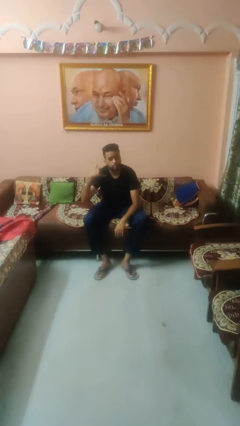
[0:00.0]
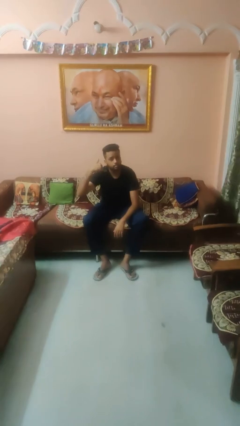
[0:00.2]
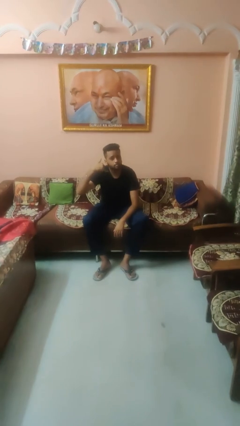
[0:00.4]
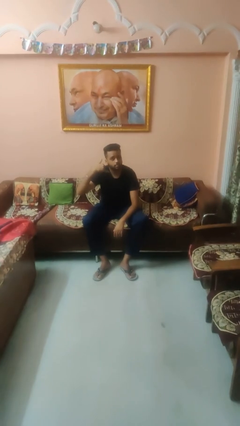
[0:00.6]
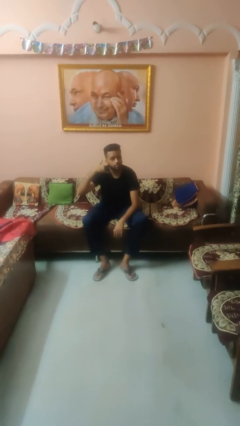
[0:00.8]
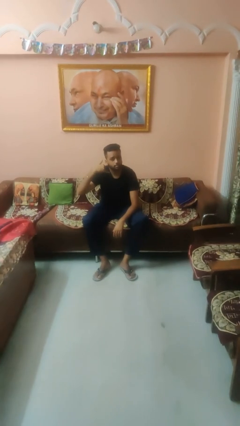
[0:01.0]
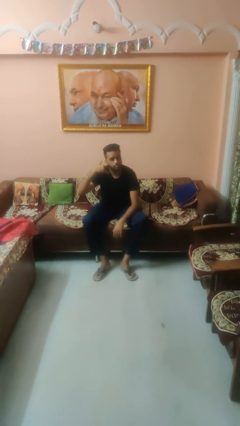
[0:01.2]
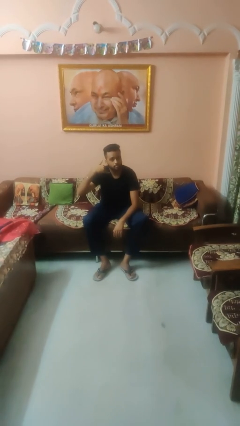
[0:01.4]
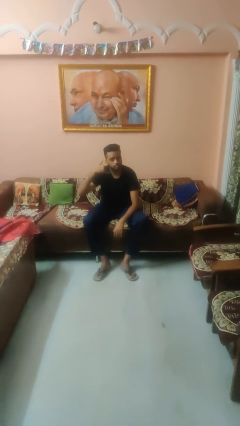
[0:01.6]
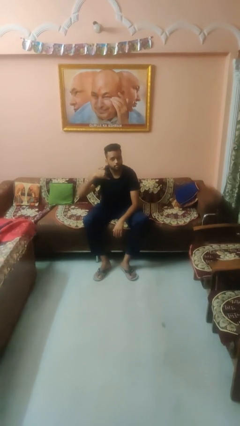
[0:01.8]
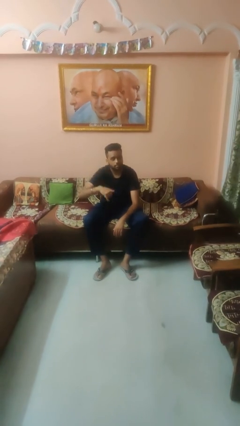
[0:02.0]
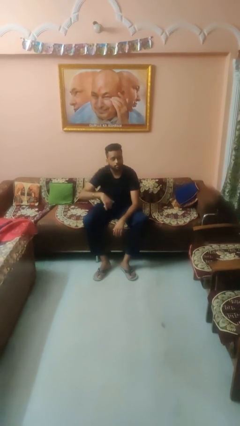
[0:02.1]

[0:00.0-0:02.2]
person gestures call me

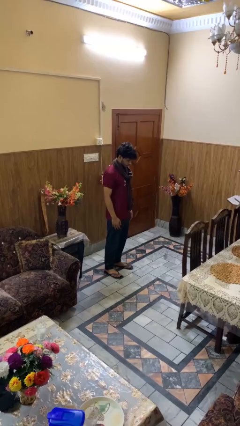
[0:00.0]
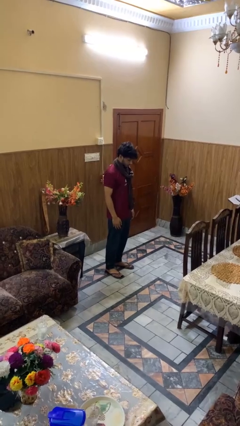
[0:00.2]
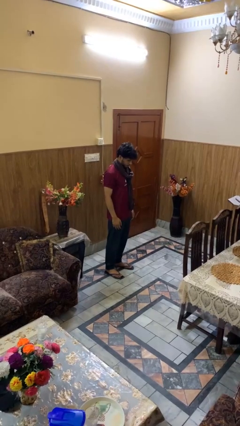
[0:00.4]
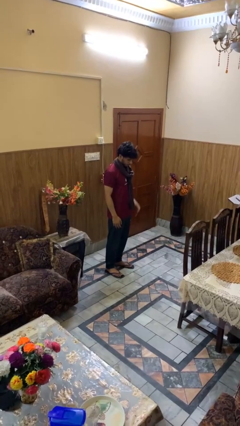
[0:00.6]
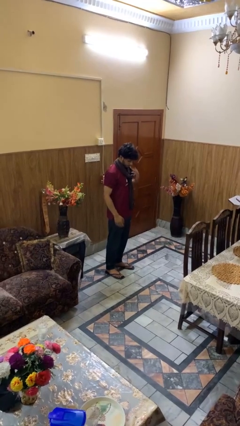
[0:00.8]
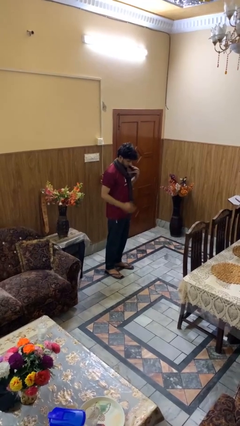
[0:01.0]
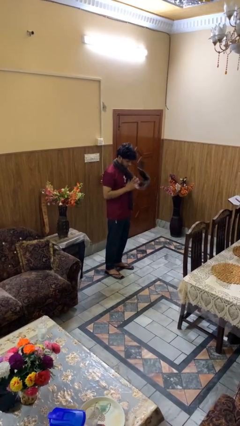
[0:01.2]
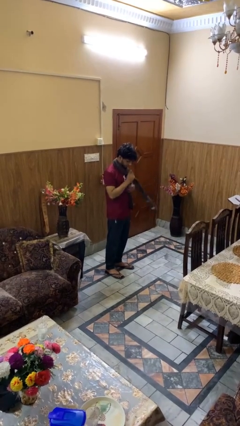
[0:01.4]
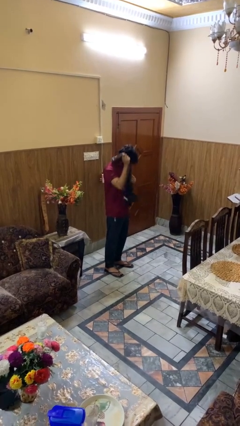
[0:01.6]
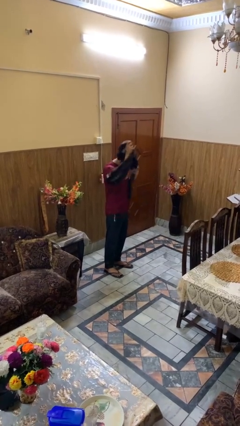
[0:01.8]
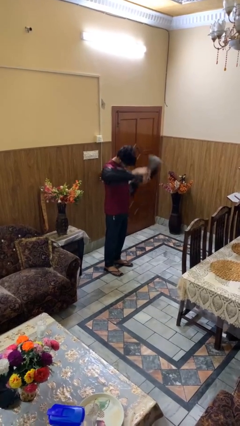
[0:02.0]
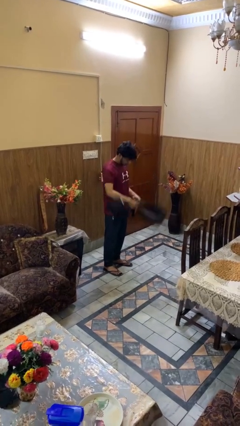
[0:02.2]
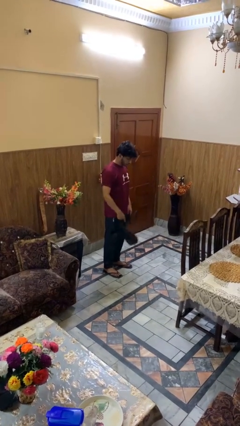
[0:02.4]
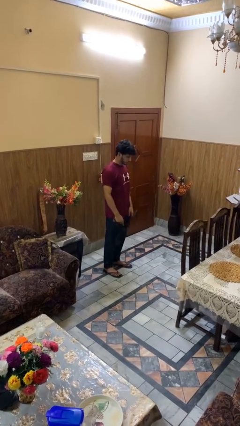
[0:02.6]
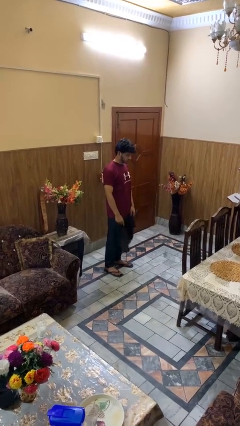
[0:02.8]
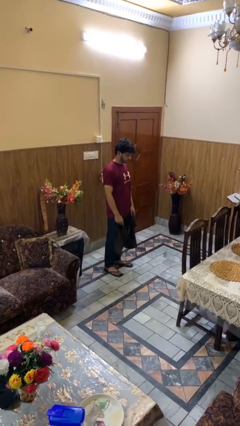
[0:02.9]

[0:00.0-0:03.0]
person takes off scarf

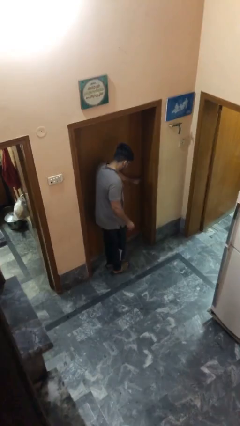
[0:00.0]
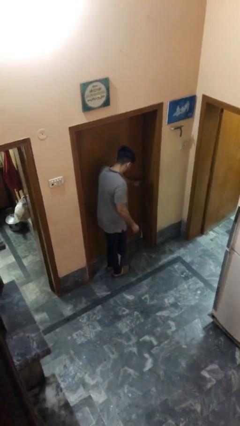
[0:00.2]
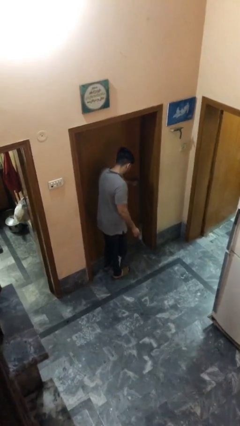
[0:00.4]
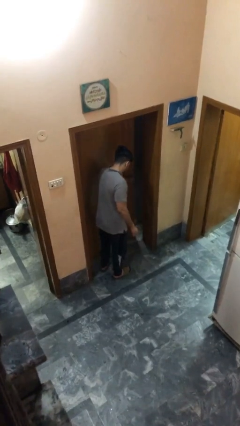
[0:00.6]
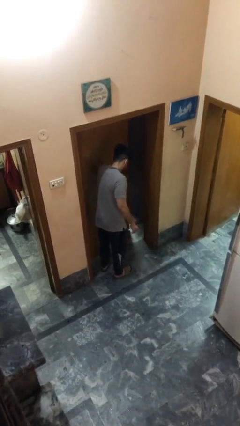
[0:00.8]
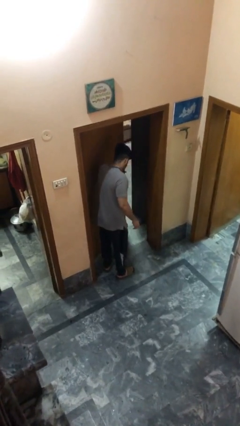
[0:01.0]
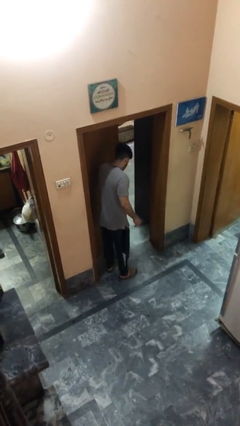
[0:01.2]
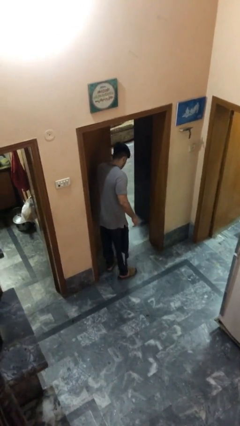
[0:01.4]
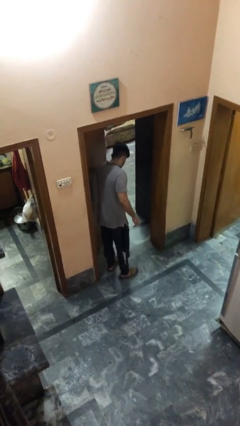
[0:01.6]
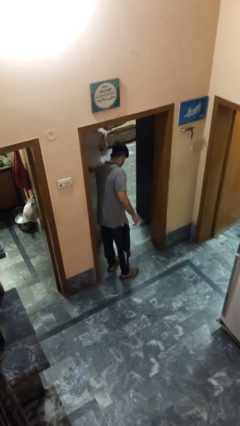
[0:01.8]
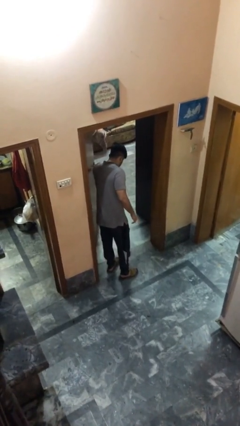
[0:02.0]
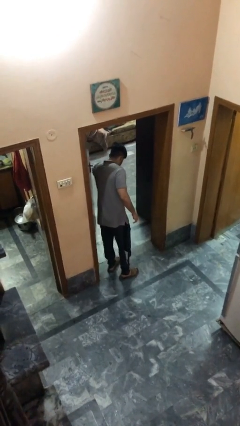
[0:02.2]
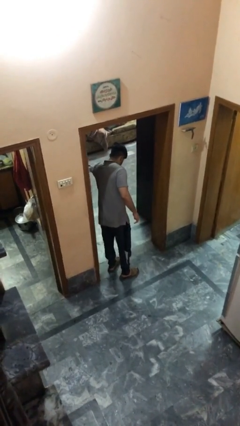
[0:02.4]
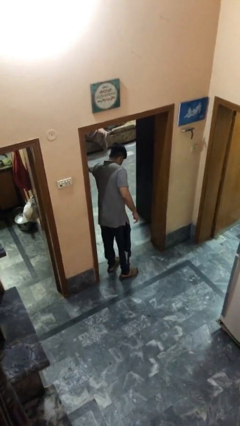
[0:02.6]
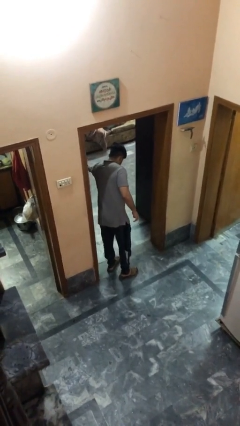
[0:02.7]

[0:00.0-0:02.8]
person opens facility door

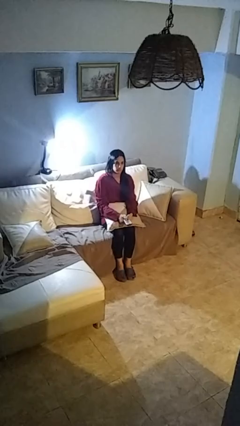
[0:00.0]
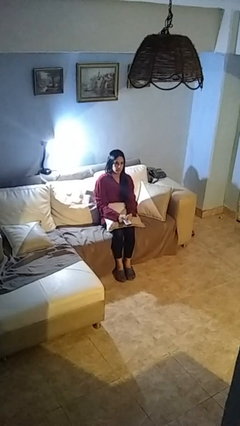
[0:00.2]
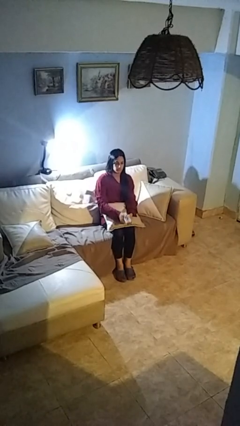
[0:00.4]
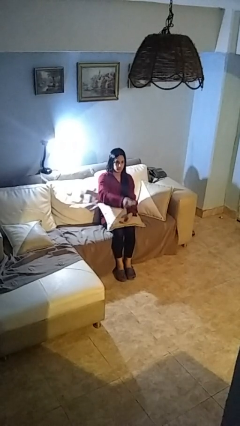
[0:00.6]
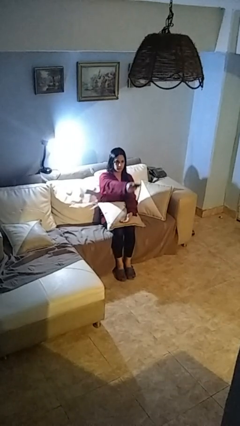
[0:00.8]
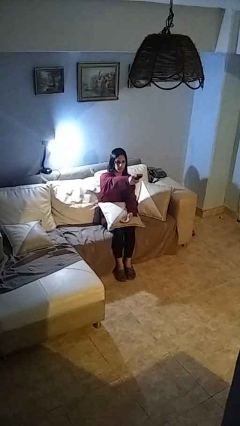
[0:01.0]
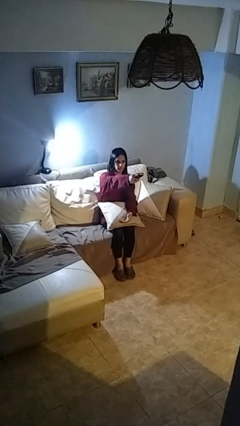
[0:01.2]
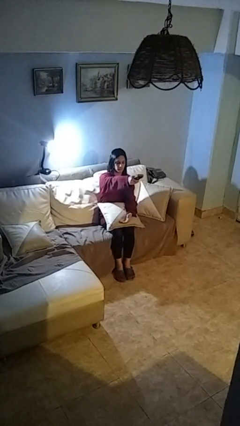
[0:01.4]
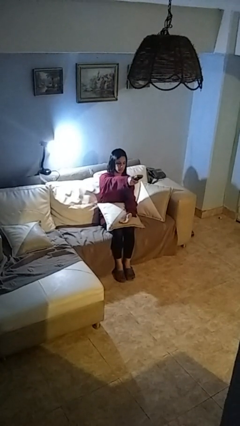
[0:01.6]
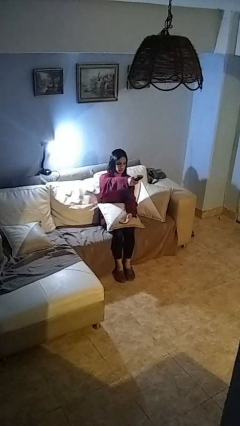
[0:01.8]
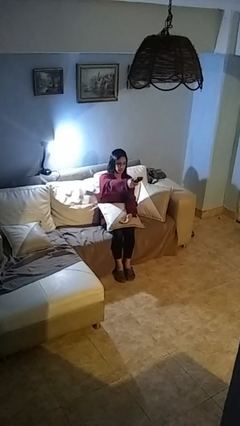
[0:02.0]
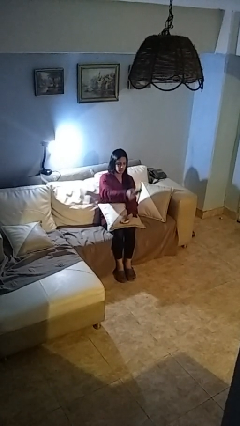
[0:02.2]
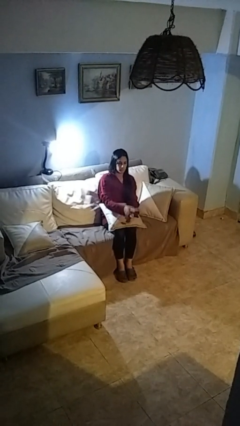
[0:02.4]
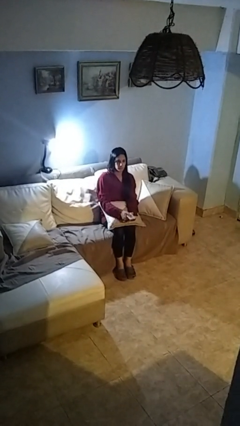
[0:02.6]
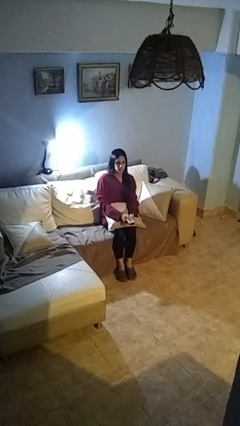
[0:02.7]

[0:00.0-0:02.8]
person uses television remote

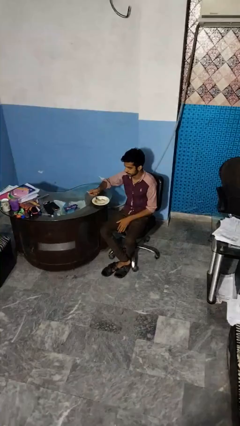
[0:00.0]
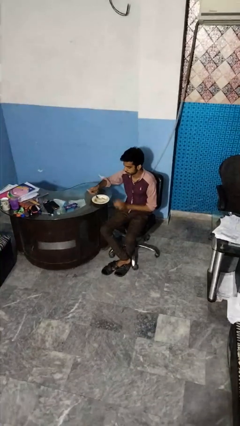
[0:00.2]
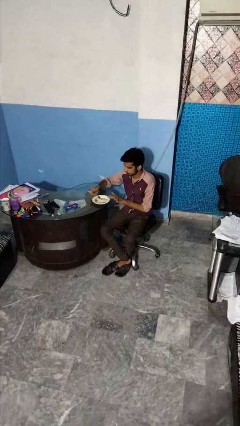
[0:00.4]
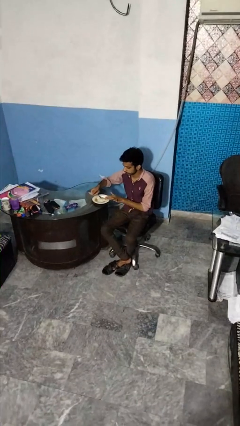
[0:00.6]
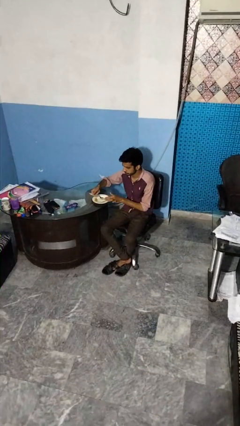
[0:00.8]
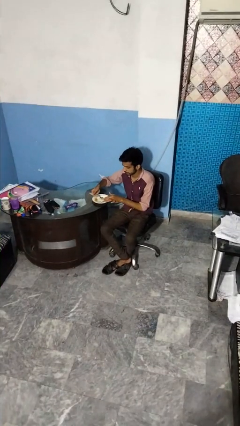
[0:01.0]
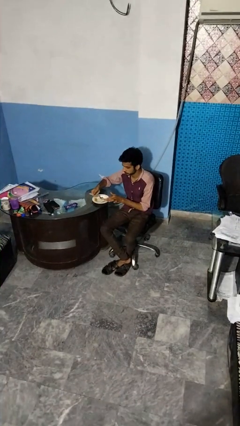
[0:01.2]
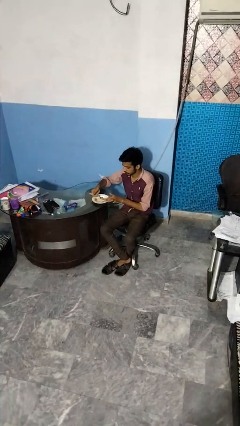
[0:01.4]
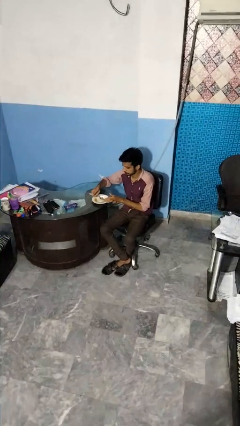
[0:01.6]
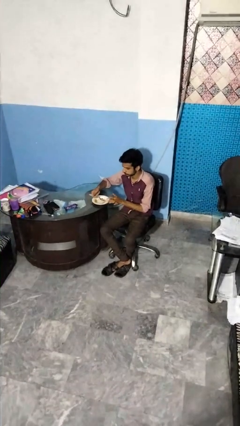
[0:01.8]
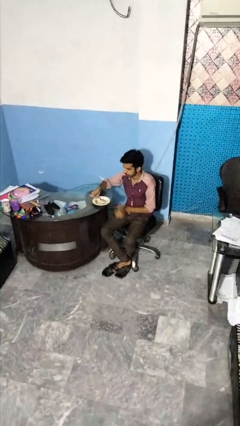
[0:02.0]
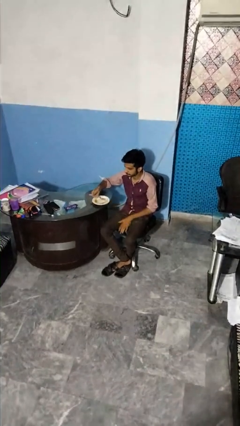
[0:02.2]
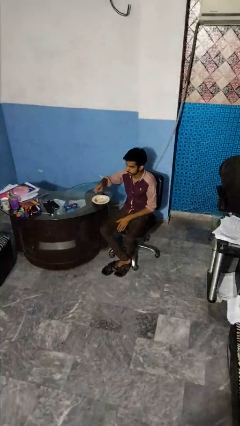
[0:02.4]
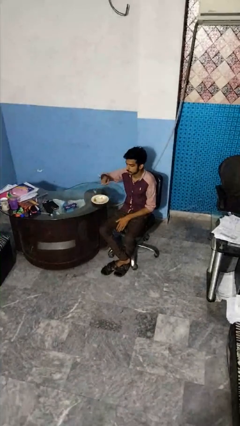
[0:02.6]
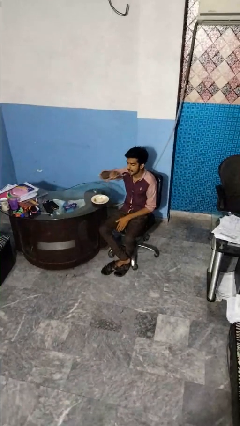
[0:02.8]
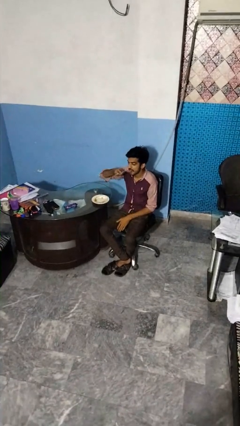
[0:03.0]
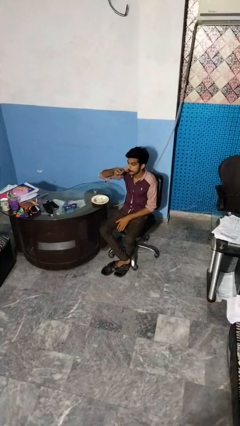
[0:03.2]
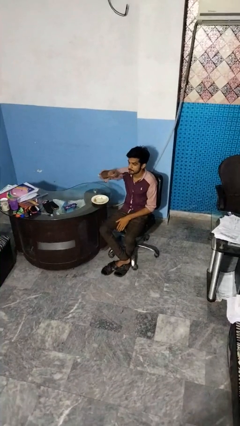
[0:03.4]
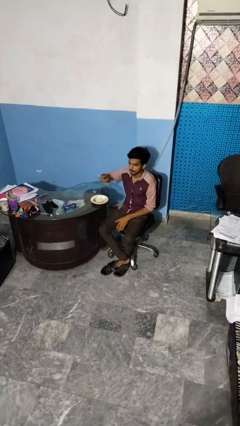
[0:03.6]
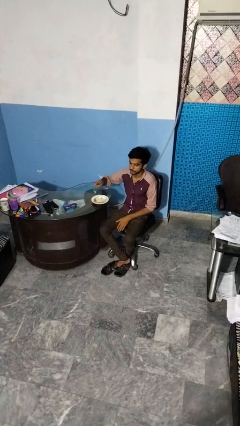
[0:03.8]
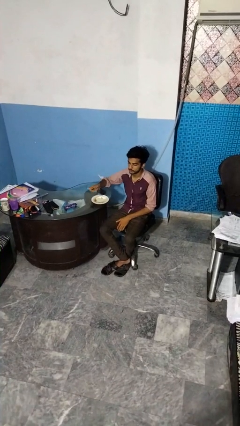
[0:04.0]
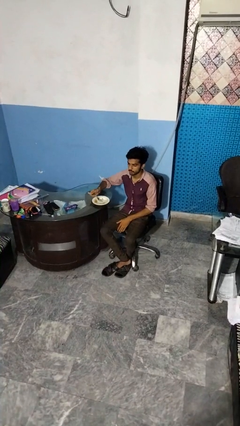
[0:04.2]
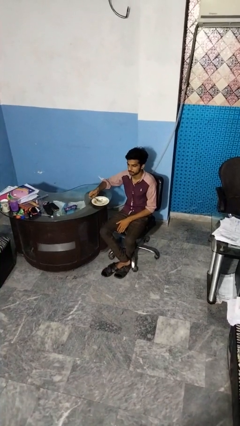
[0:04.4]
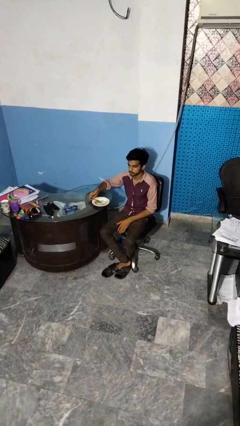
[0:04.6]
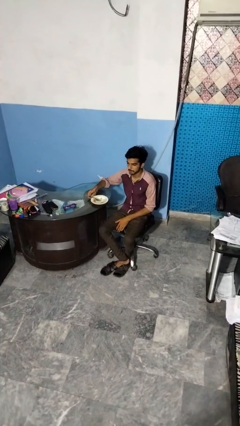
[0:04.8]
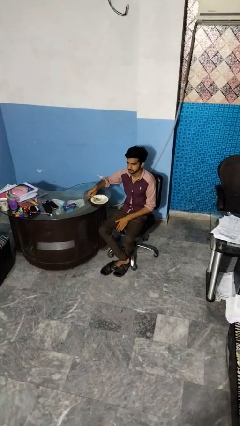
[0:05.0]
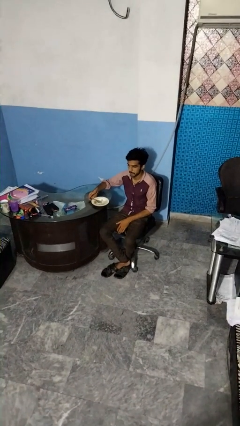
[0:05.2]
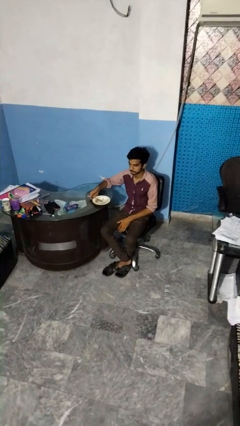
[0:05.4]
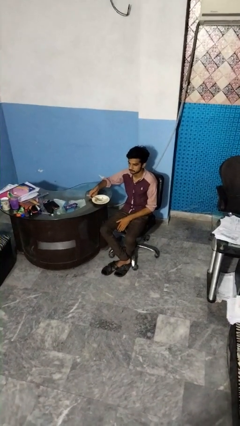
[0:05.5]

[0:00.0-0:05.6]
person eats with utensil

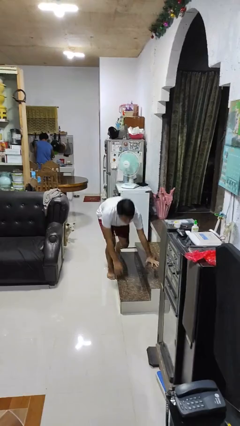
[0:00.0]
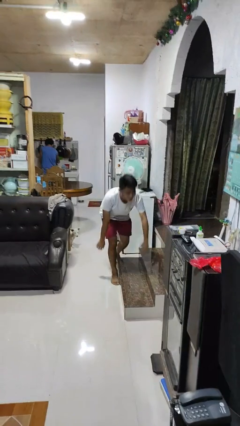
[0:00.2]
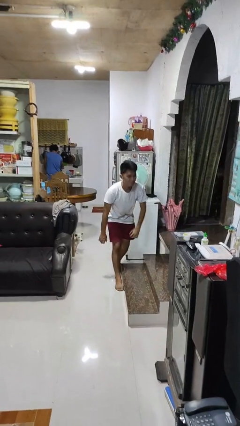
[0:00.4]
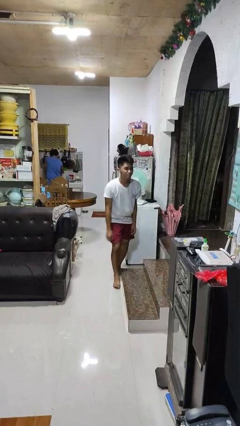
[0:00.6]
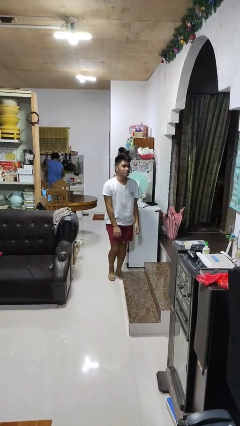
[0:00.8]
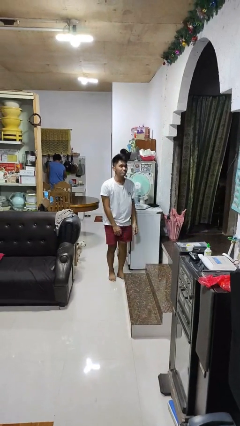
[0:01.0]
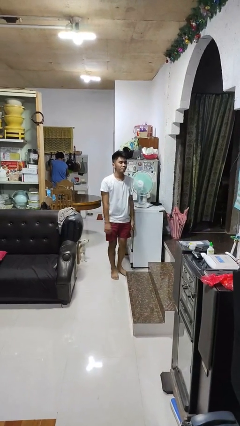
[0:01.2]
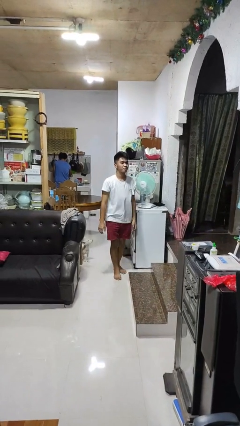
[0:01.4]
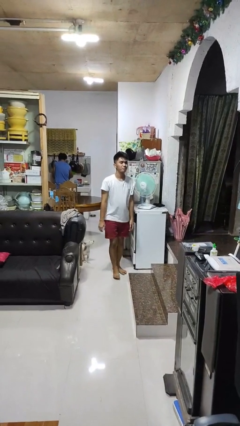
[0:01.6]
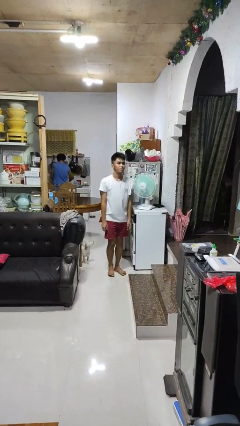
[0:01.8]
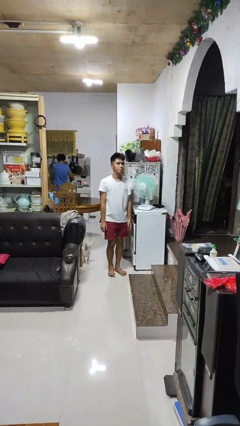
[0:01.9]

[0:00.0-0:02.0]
person stands up from floor
